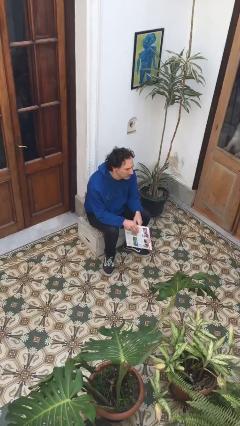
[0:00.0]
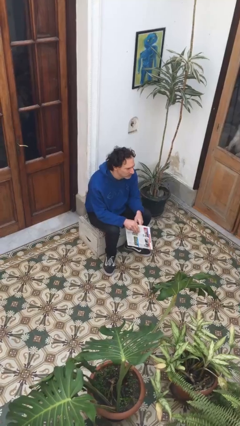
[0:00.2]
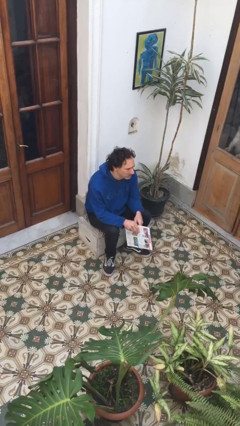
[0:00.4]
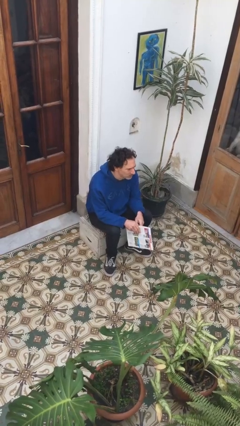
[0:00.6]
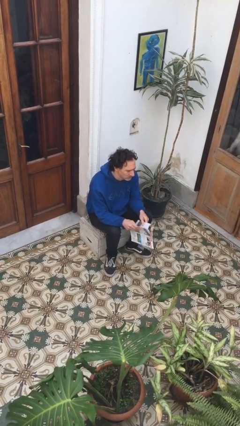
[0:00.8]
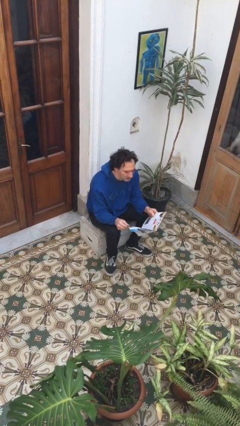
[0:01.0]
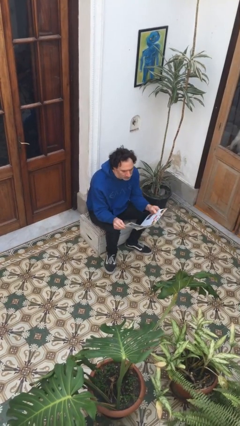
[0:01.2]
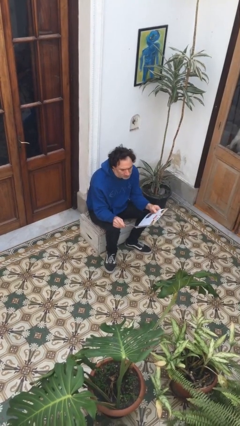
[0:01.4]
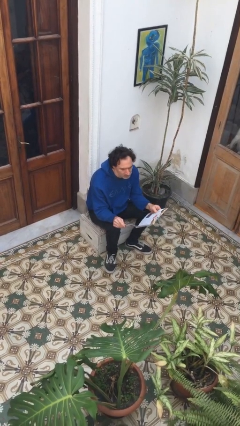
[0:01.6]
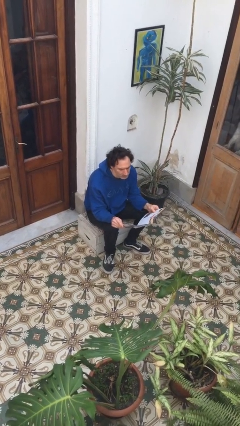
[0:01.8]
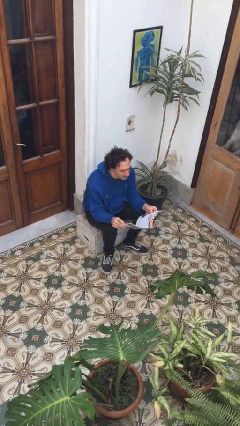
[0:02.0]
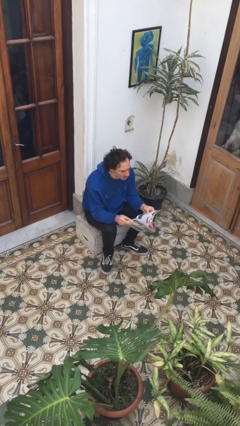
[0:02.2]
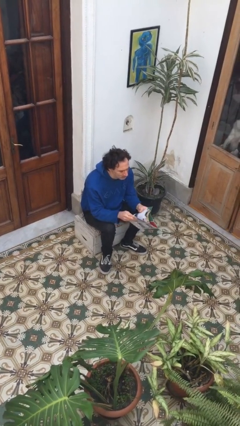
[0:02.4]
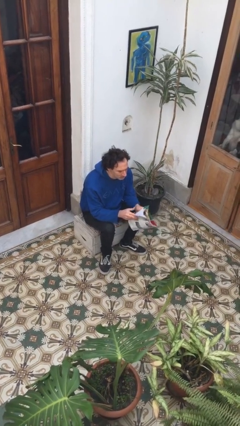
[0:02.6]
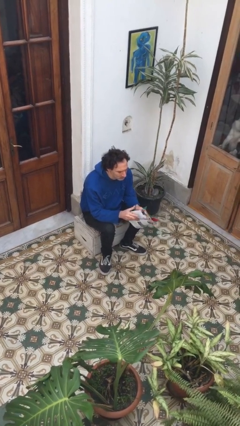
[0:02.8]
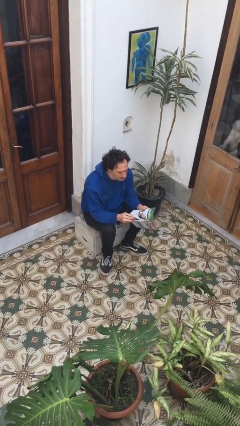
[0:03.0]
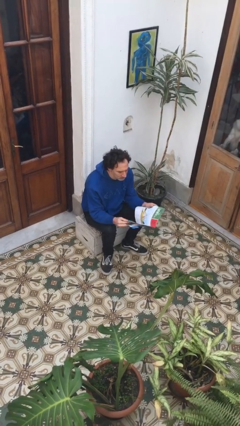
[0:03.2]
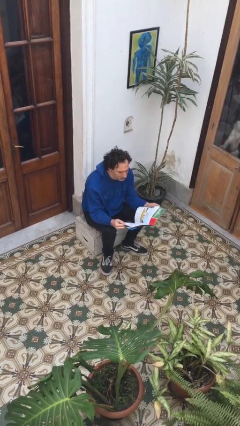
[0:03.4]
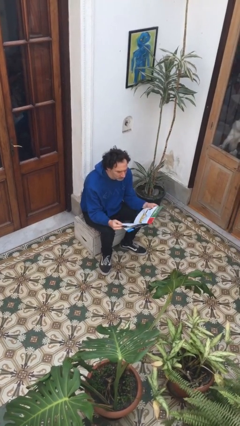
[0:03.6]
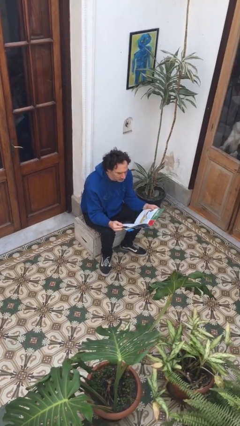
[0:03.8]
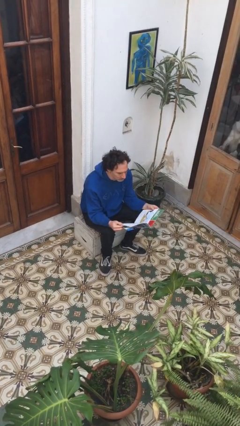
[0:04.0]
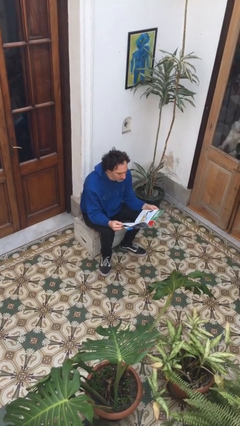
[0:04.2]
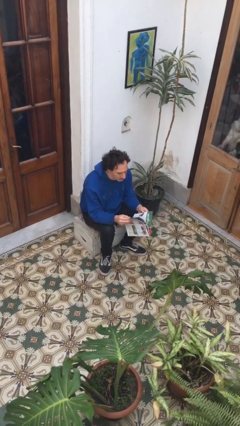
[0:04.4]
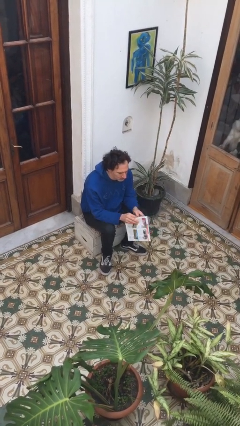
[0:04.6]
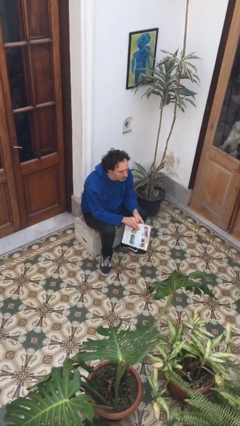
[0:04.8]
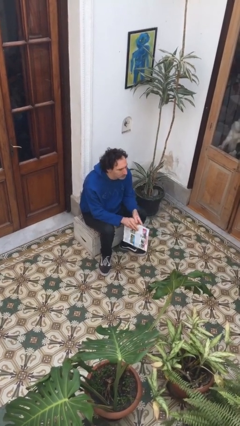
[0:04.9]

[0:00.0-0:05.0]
person reads magazine

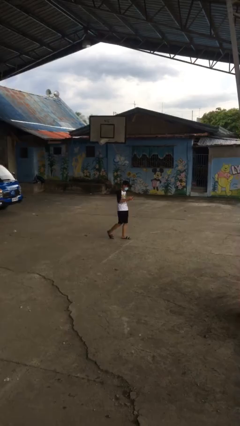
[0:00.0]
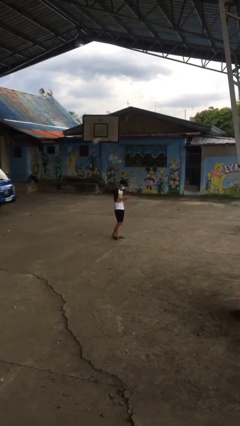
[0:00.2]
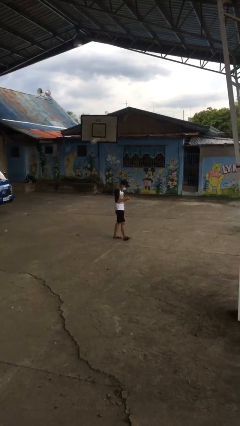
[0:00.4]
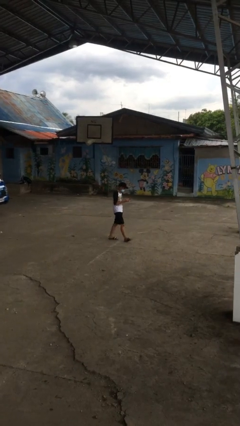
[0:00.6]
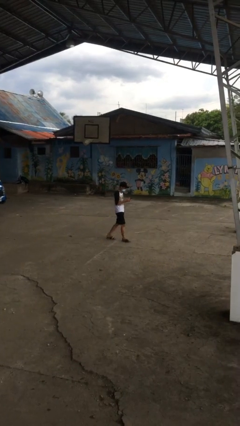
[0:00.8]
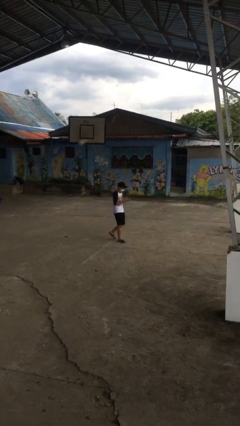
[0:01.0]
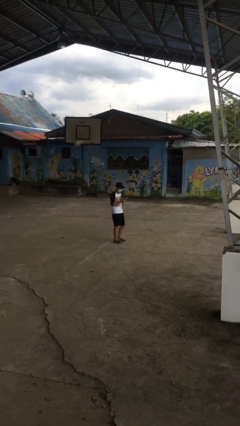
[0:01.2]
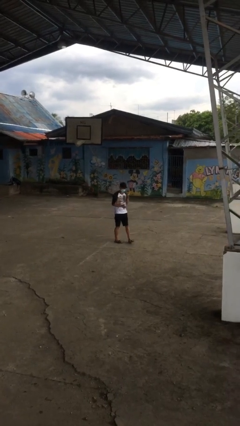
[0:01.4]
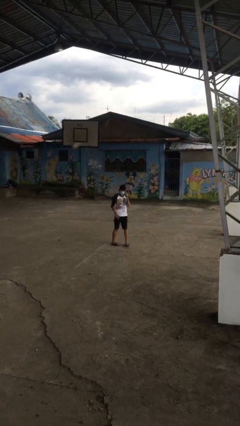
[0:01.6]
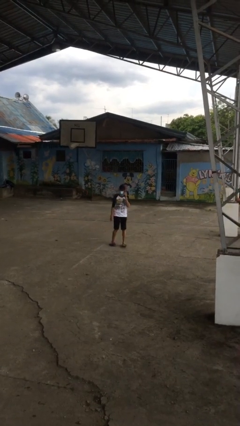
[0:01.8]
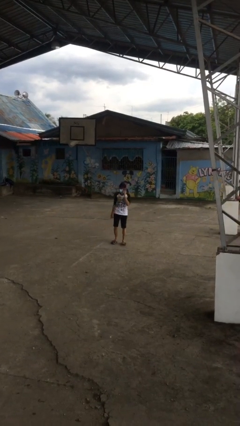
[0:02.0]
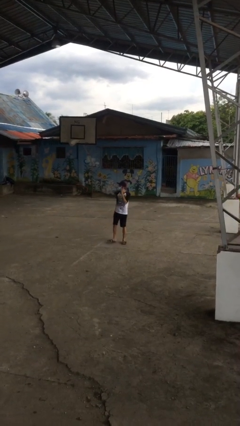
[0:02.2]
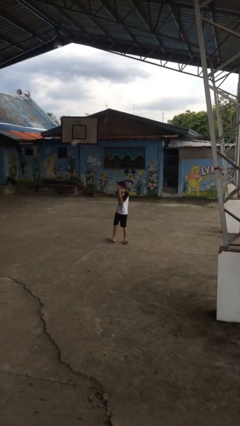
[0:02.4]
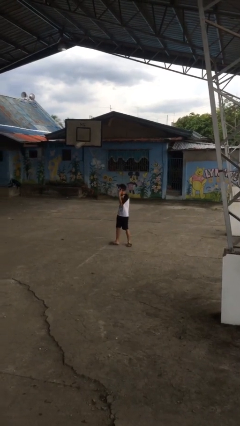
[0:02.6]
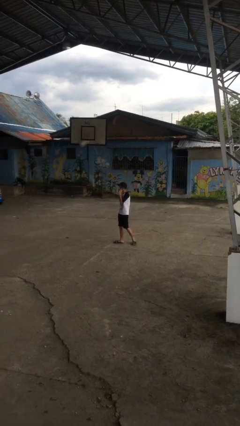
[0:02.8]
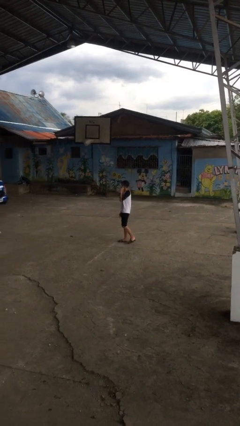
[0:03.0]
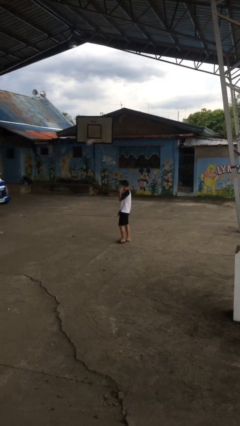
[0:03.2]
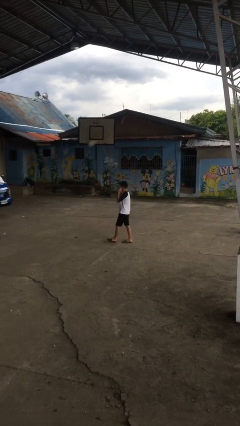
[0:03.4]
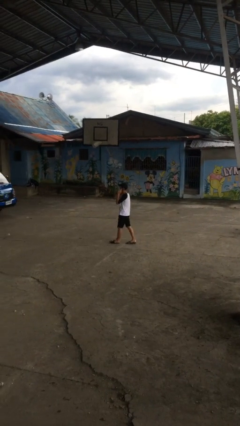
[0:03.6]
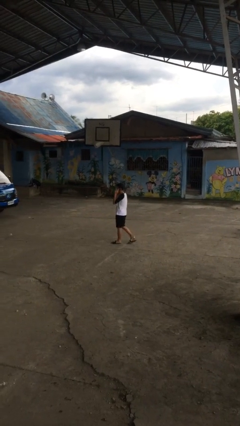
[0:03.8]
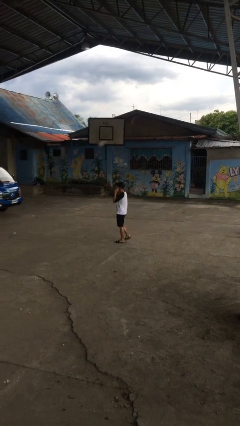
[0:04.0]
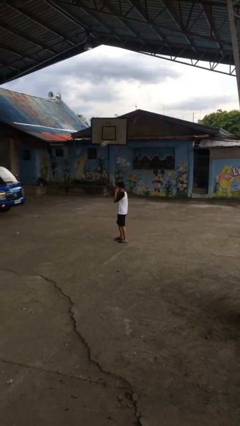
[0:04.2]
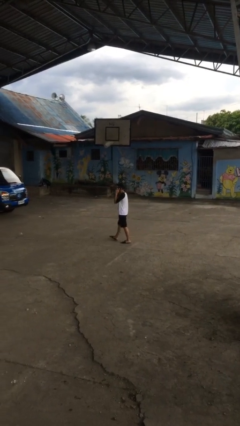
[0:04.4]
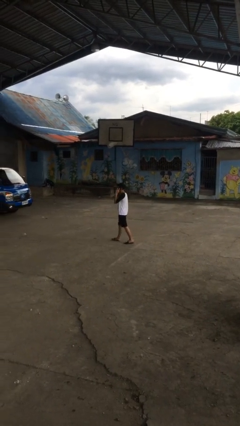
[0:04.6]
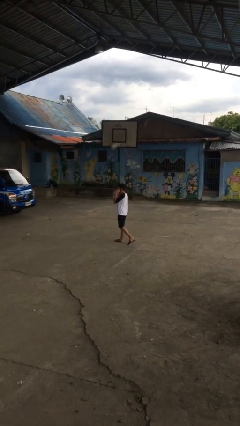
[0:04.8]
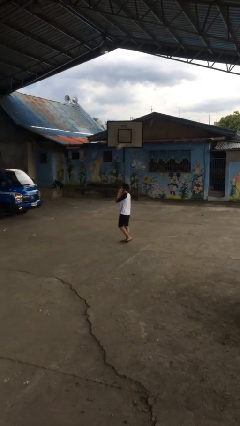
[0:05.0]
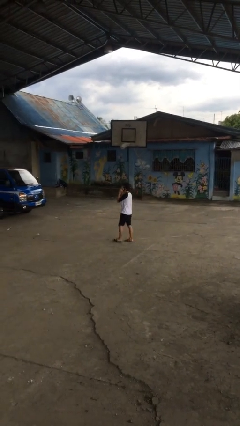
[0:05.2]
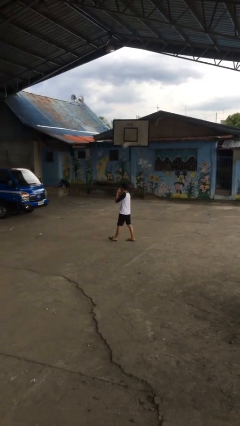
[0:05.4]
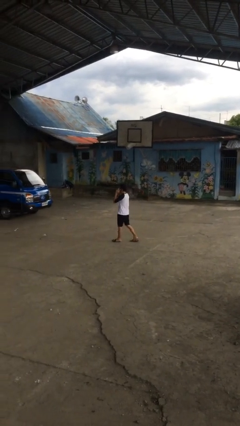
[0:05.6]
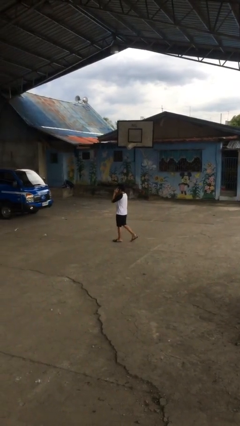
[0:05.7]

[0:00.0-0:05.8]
person talks on phone

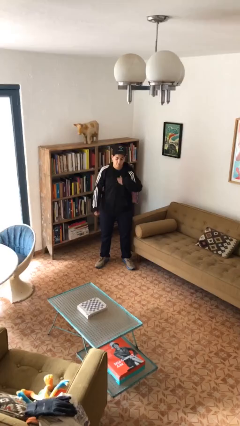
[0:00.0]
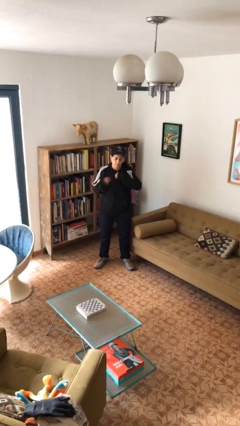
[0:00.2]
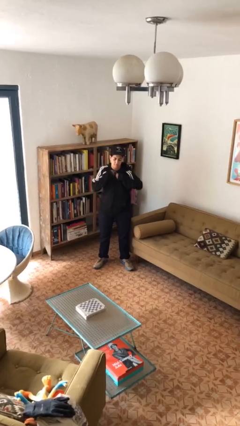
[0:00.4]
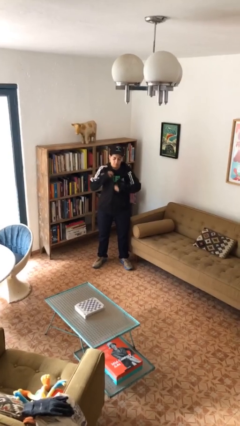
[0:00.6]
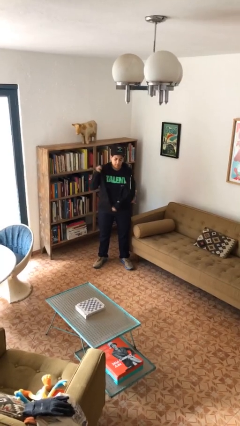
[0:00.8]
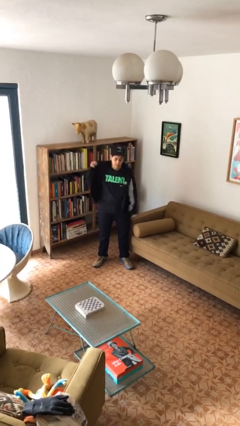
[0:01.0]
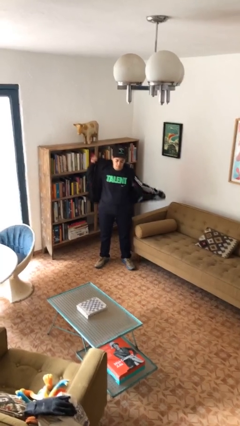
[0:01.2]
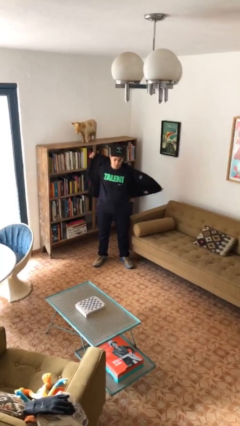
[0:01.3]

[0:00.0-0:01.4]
person unzips jacket

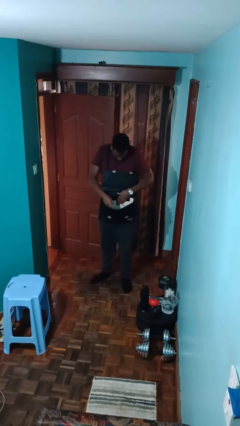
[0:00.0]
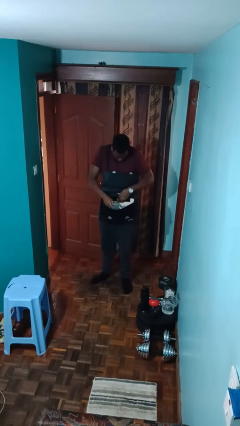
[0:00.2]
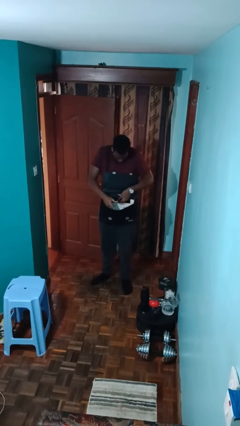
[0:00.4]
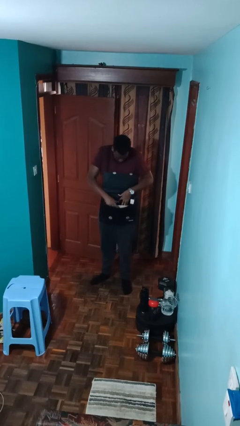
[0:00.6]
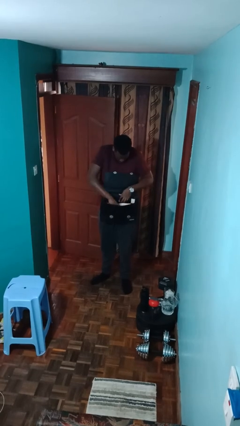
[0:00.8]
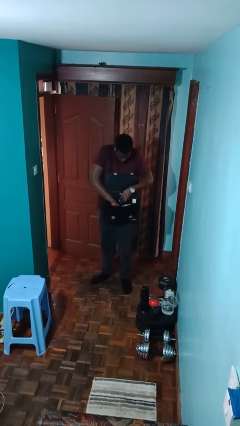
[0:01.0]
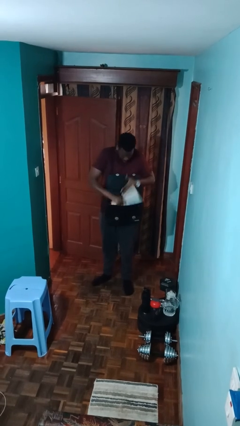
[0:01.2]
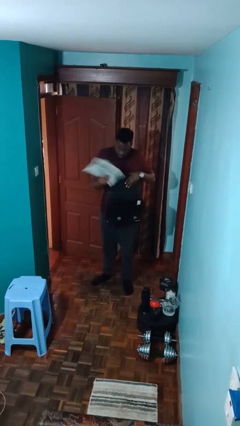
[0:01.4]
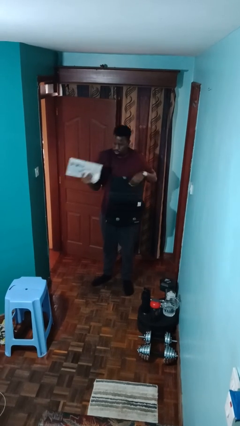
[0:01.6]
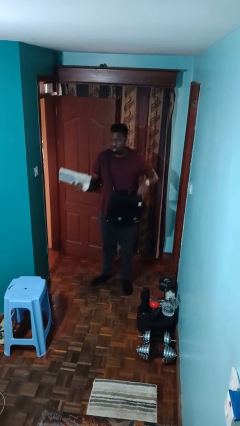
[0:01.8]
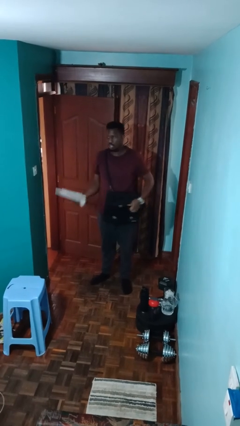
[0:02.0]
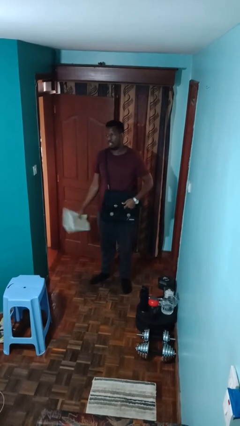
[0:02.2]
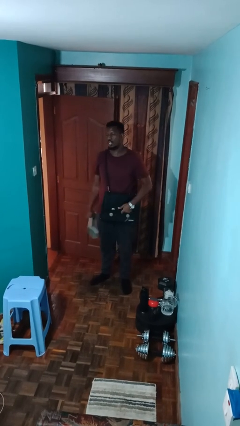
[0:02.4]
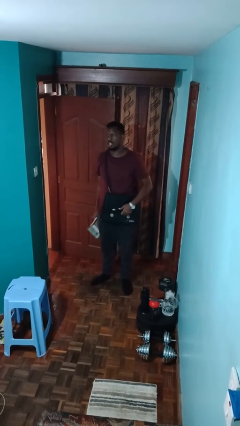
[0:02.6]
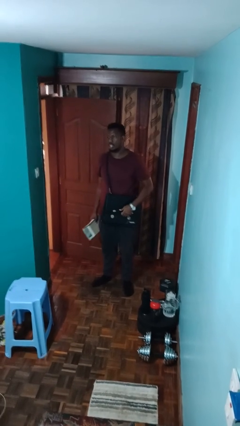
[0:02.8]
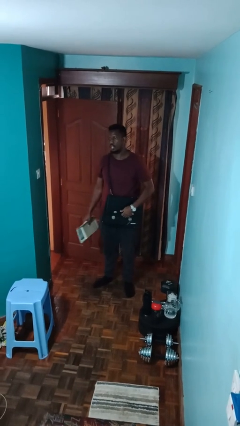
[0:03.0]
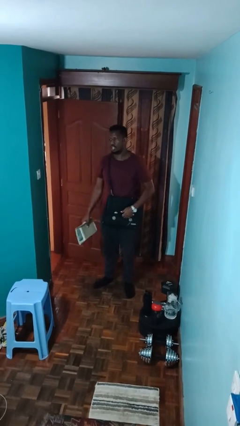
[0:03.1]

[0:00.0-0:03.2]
person takes object from purse

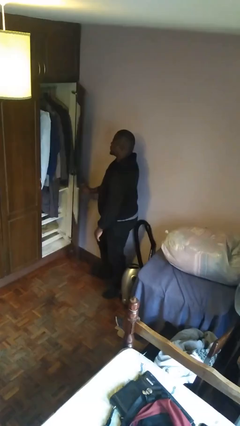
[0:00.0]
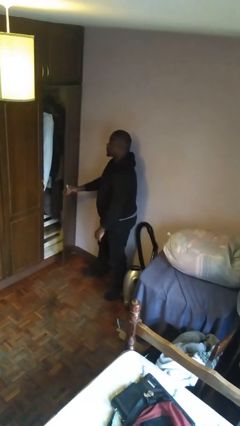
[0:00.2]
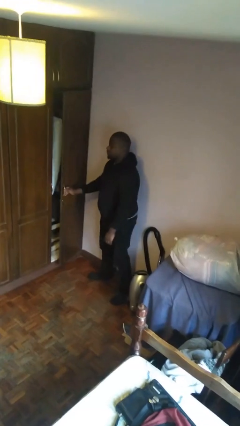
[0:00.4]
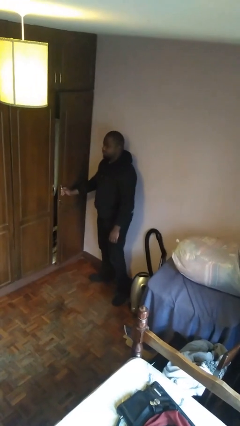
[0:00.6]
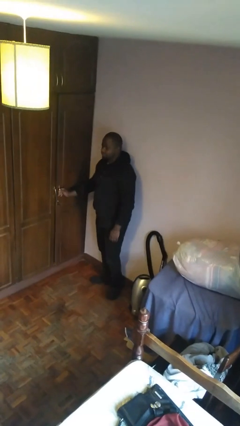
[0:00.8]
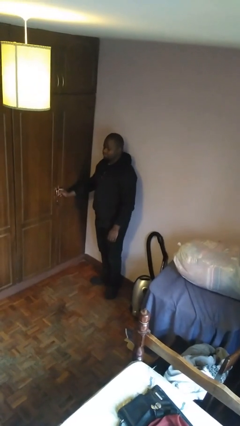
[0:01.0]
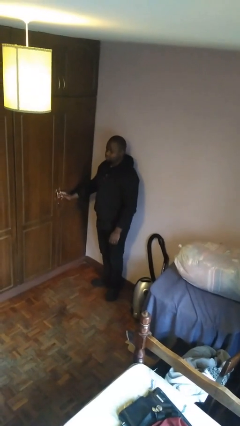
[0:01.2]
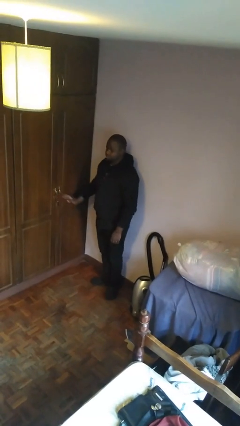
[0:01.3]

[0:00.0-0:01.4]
person closes closet door

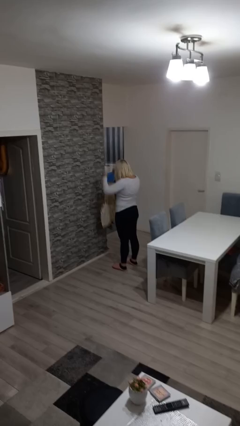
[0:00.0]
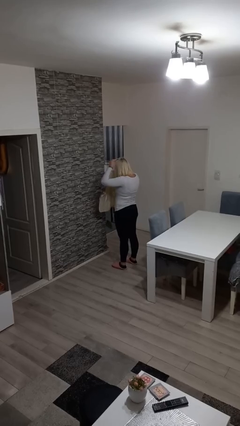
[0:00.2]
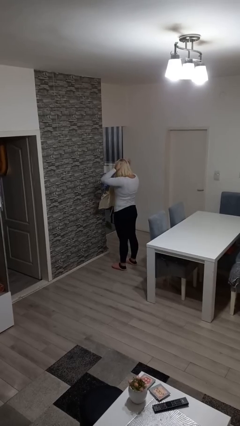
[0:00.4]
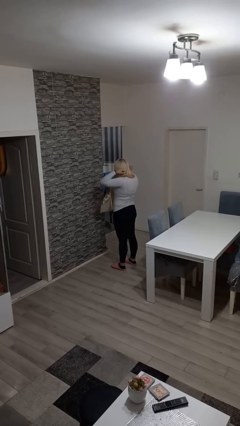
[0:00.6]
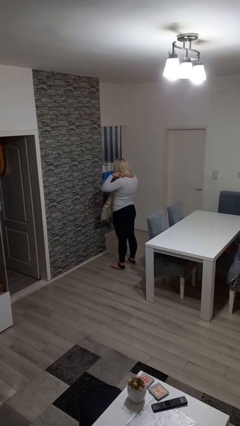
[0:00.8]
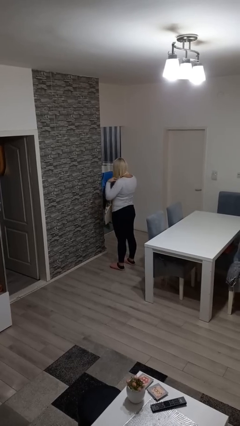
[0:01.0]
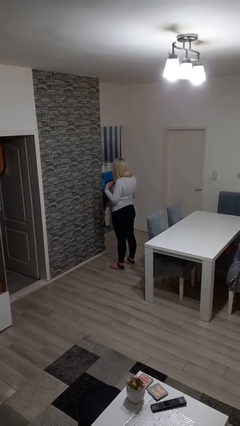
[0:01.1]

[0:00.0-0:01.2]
person puts on apron
